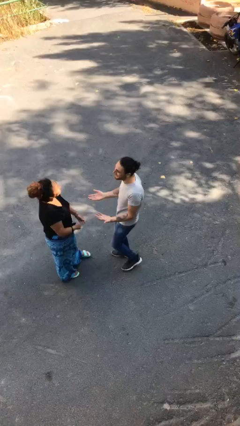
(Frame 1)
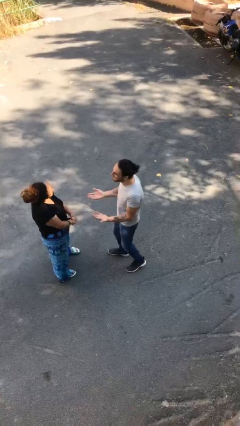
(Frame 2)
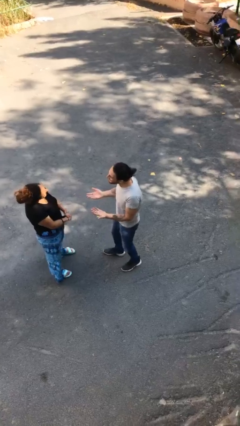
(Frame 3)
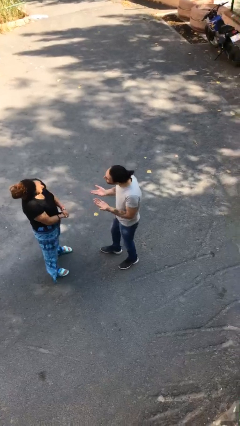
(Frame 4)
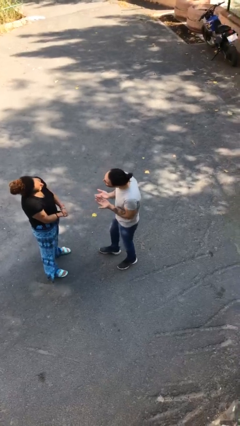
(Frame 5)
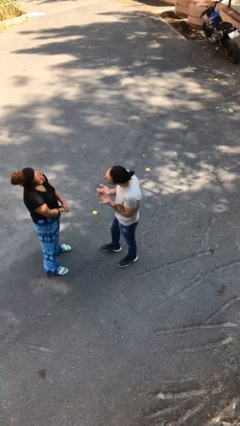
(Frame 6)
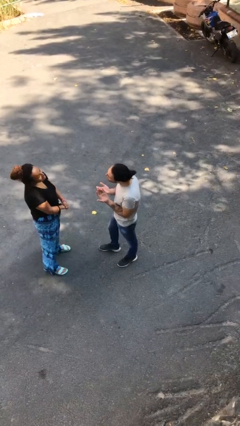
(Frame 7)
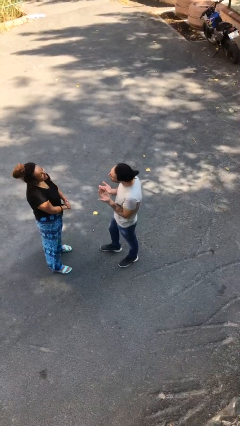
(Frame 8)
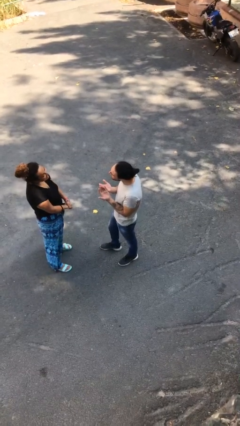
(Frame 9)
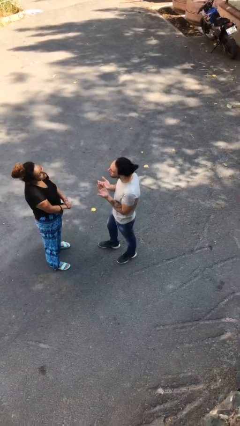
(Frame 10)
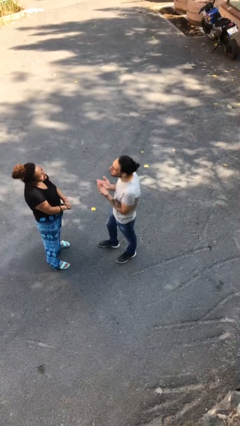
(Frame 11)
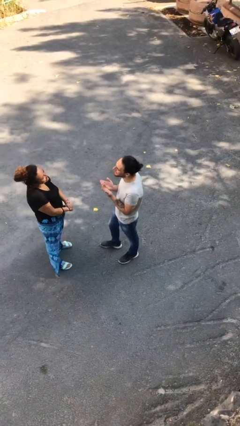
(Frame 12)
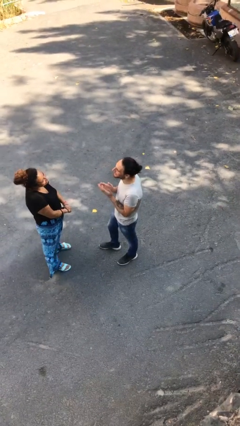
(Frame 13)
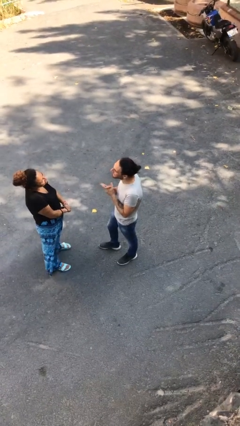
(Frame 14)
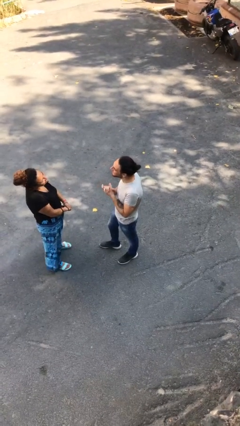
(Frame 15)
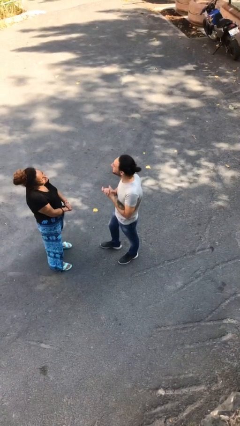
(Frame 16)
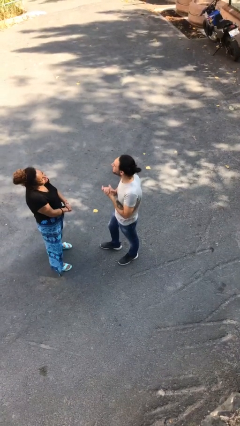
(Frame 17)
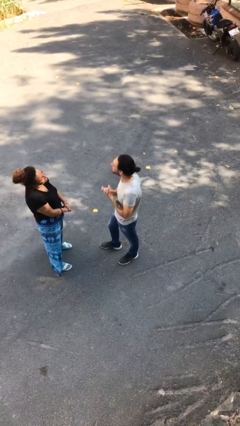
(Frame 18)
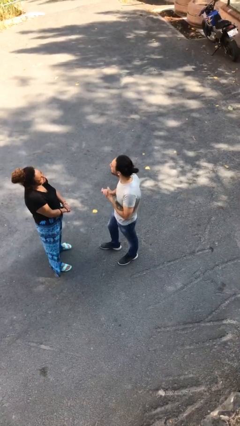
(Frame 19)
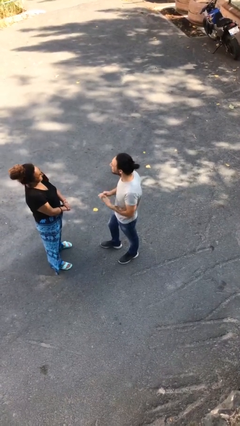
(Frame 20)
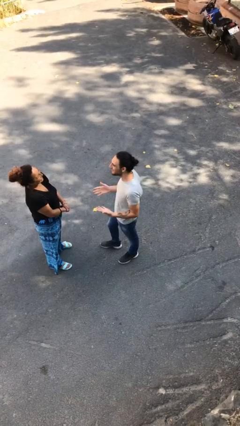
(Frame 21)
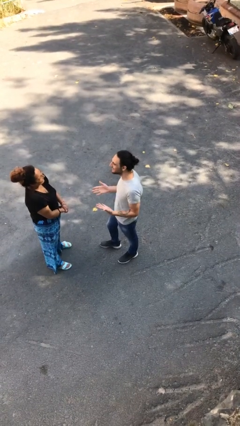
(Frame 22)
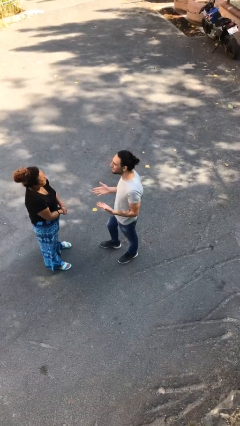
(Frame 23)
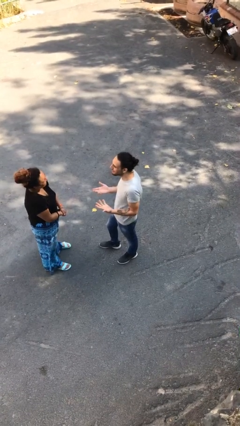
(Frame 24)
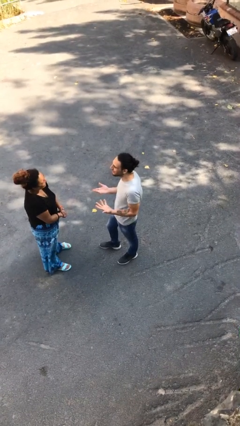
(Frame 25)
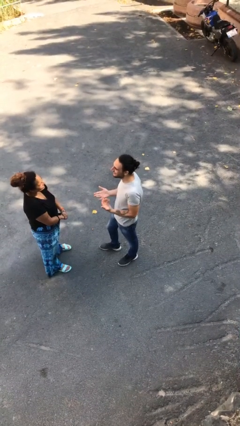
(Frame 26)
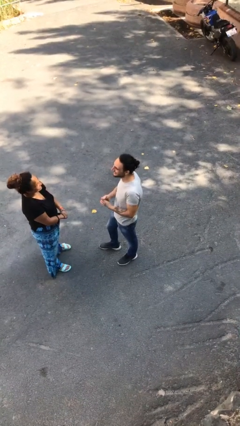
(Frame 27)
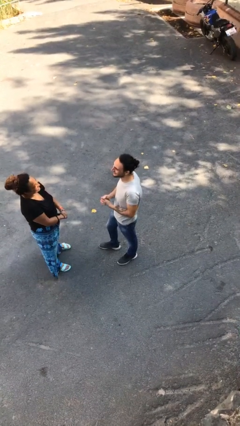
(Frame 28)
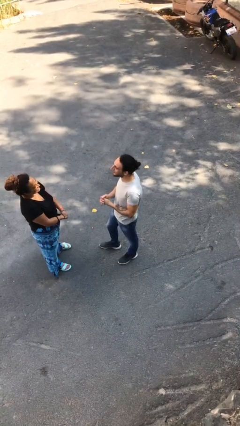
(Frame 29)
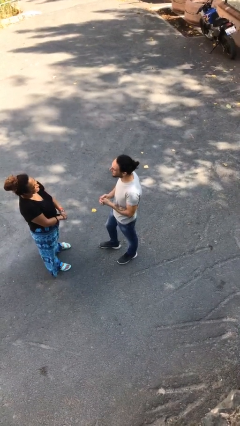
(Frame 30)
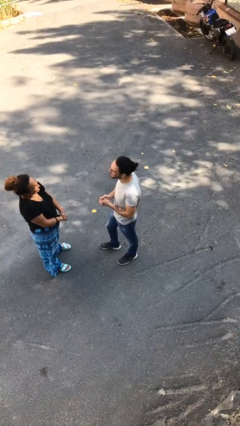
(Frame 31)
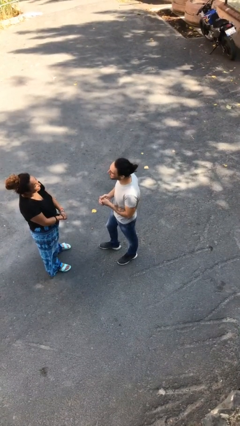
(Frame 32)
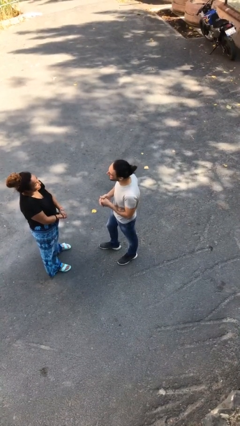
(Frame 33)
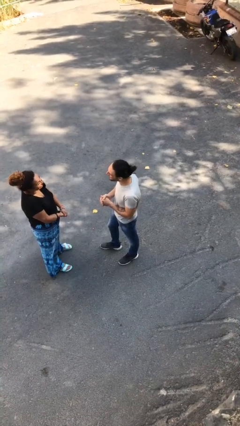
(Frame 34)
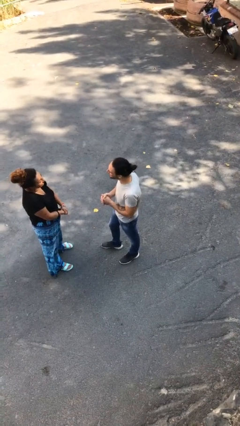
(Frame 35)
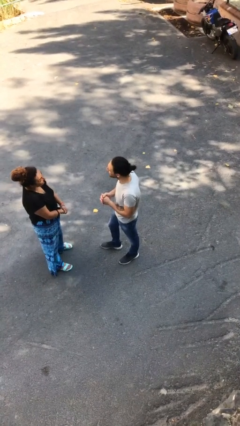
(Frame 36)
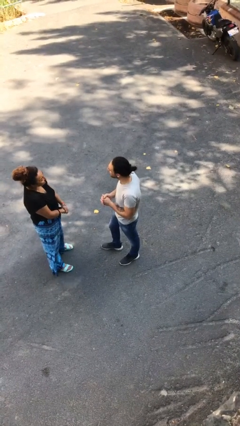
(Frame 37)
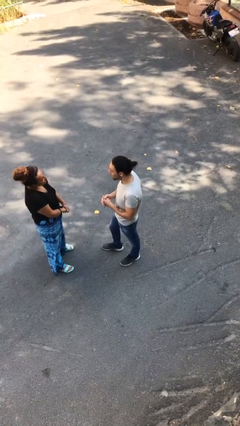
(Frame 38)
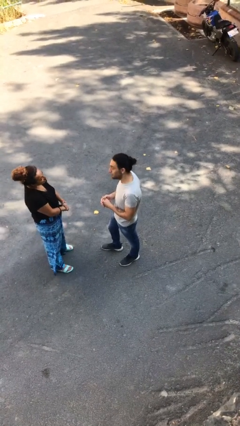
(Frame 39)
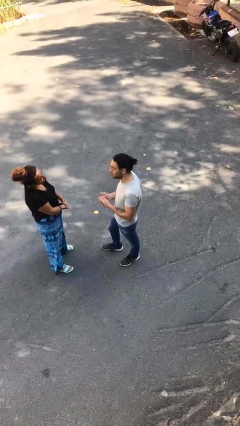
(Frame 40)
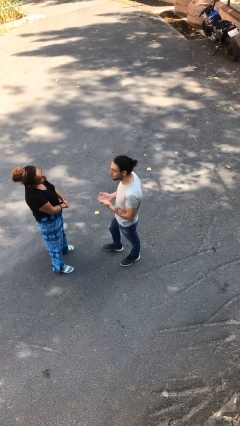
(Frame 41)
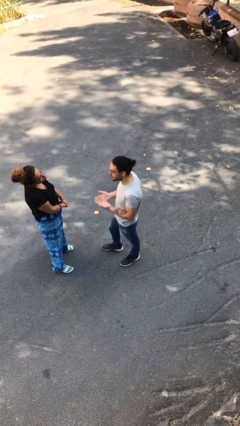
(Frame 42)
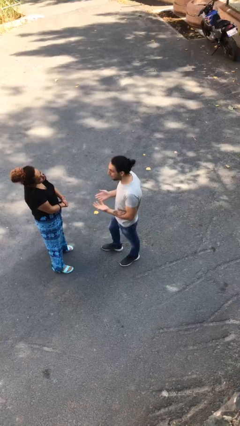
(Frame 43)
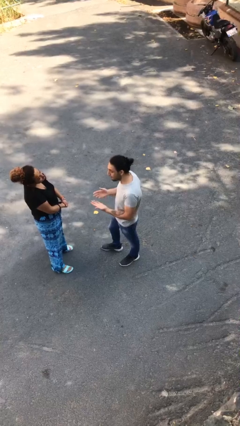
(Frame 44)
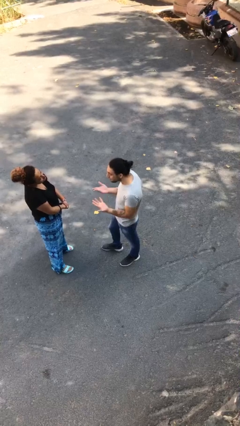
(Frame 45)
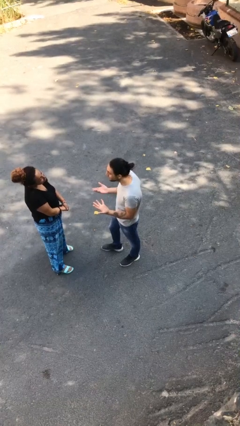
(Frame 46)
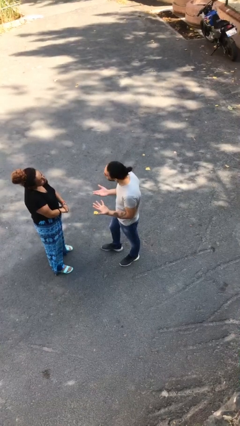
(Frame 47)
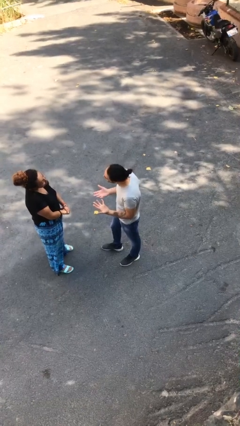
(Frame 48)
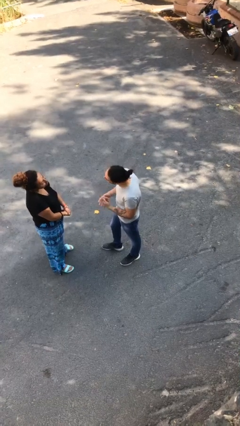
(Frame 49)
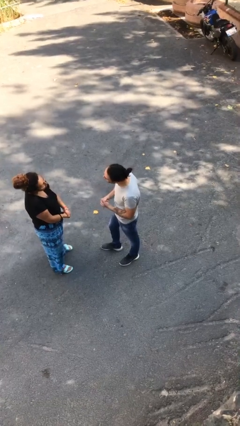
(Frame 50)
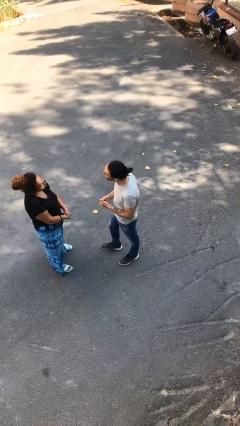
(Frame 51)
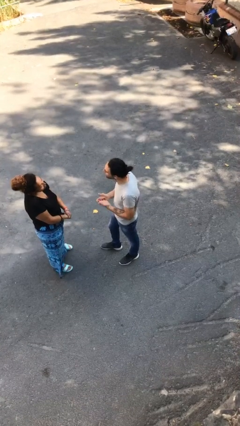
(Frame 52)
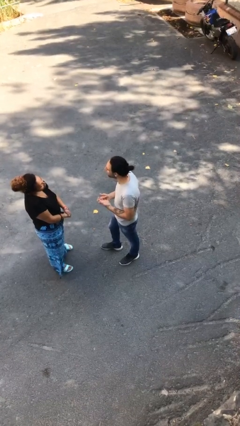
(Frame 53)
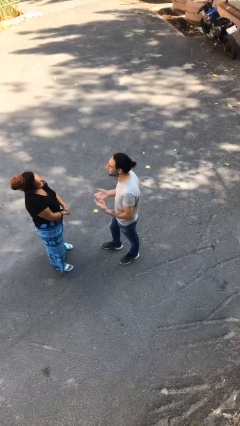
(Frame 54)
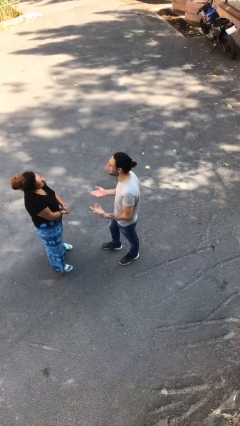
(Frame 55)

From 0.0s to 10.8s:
person talks to person

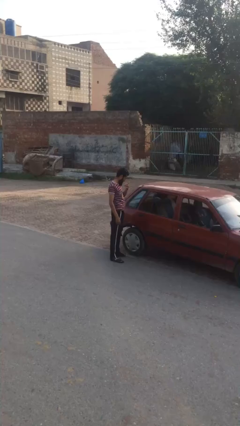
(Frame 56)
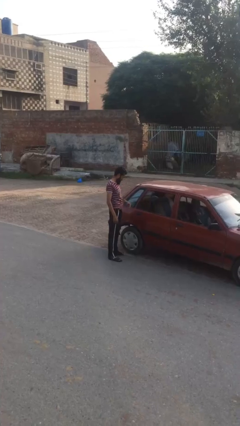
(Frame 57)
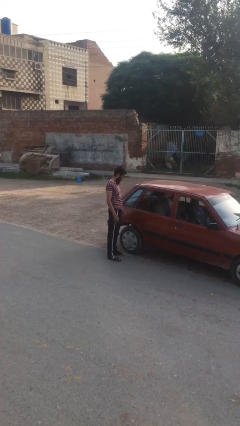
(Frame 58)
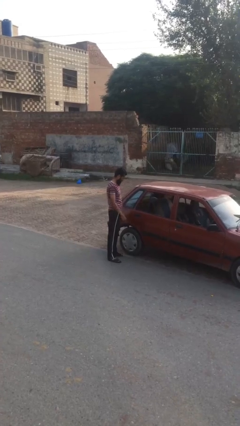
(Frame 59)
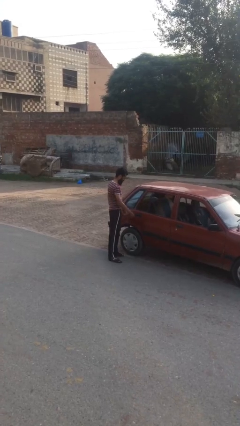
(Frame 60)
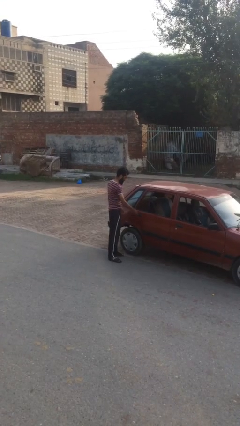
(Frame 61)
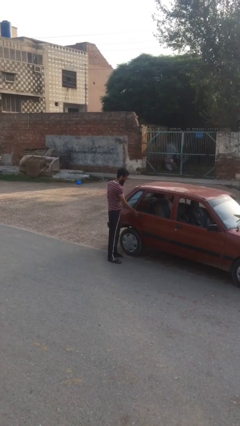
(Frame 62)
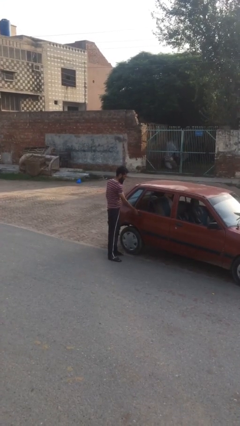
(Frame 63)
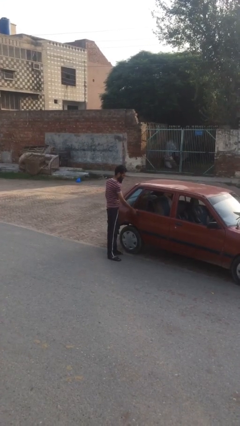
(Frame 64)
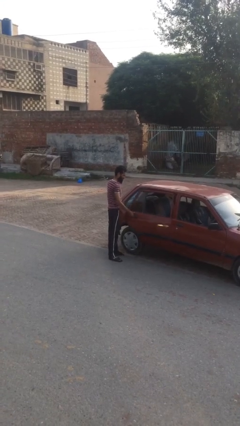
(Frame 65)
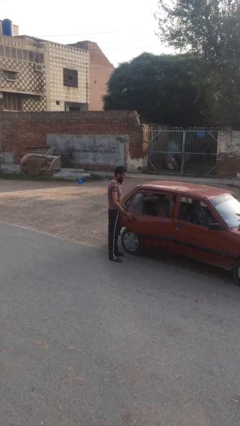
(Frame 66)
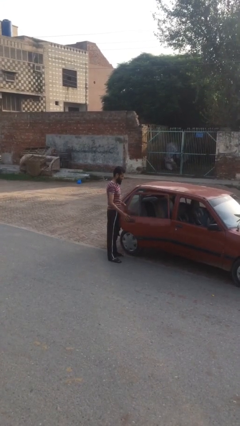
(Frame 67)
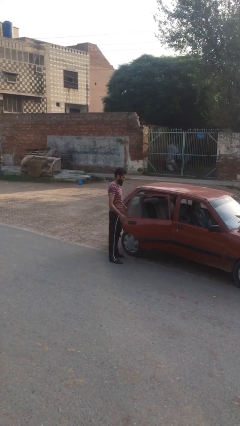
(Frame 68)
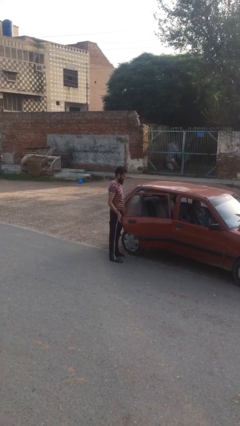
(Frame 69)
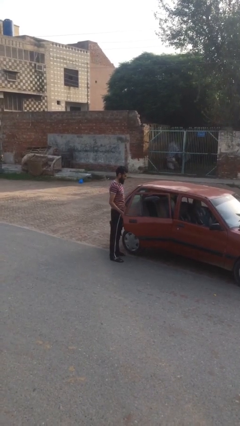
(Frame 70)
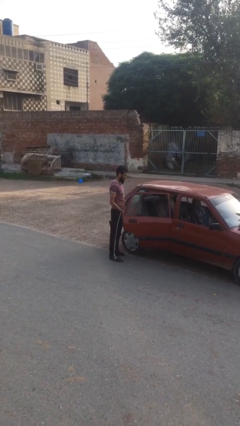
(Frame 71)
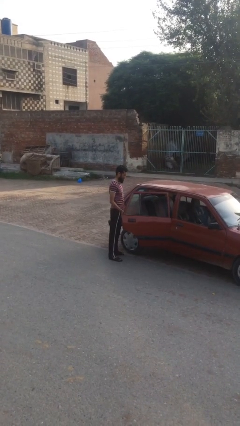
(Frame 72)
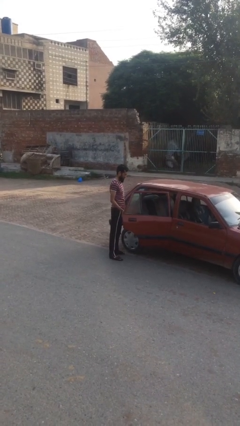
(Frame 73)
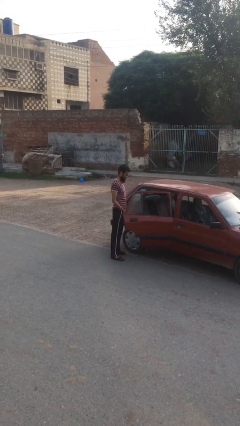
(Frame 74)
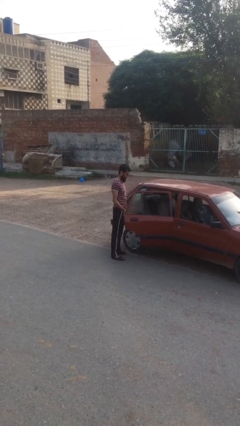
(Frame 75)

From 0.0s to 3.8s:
person opens car door

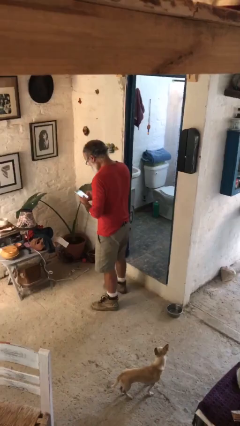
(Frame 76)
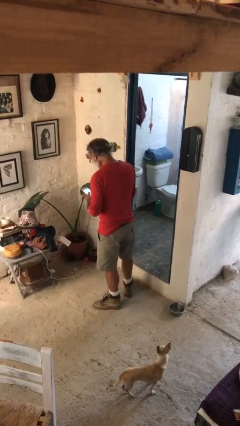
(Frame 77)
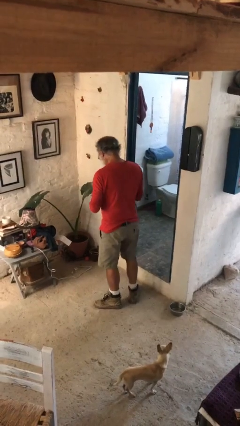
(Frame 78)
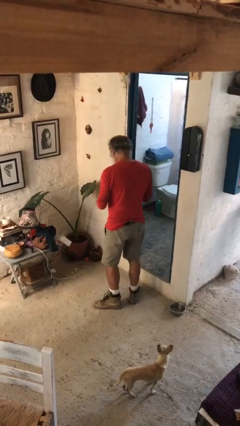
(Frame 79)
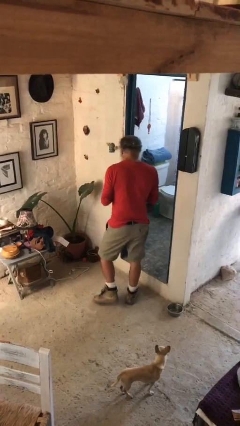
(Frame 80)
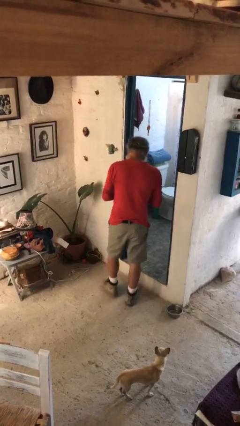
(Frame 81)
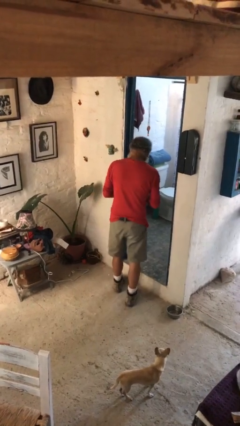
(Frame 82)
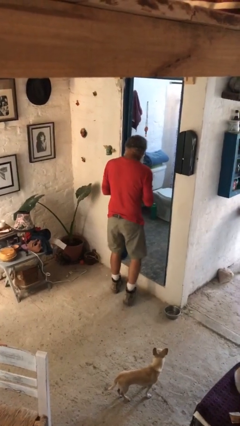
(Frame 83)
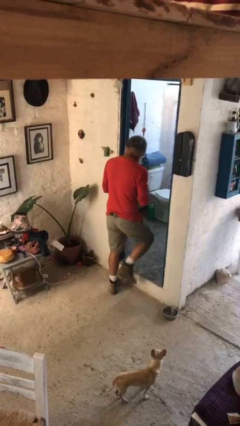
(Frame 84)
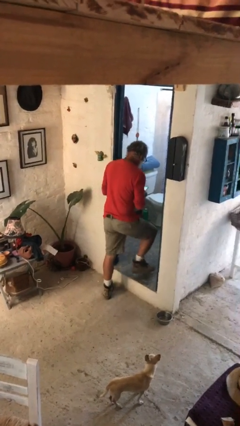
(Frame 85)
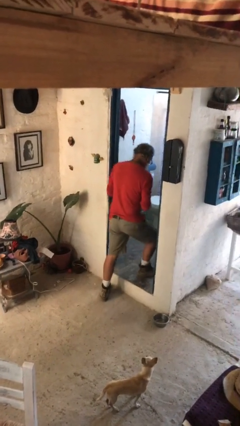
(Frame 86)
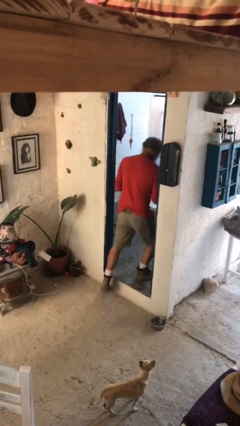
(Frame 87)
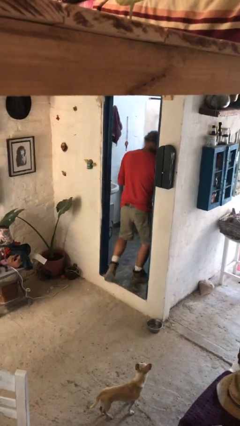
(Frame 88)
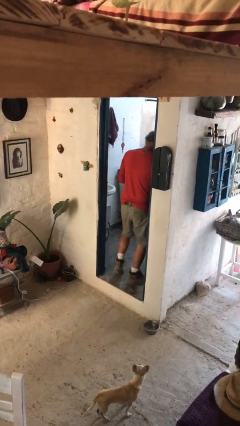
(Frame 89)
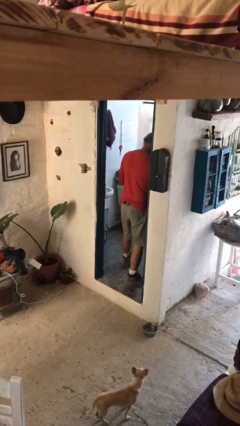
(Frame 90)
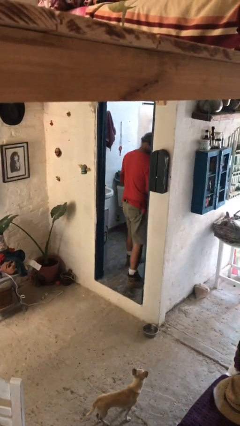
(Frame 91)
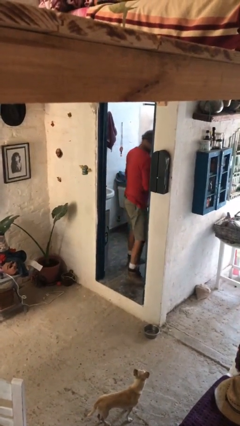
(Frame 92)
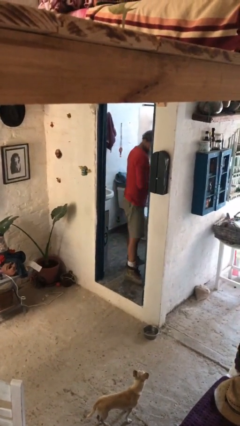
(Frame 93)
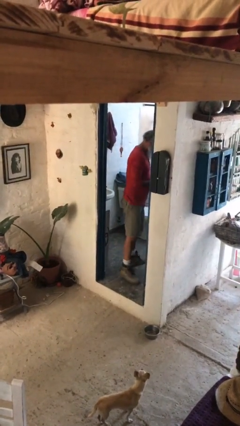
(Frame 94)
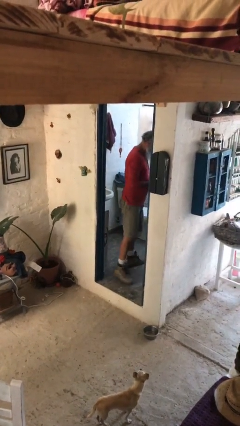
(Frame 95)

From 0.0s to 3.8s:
person exits scene through structure
